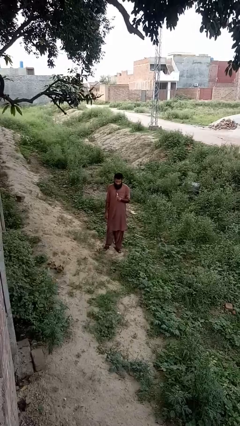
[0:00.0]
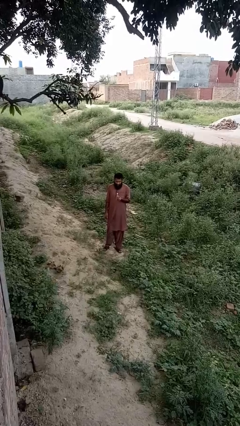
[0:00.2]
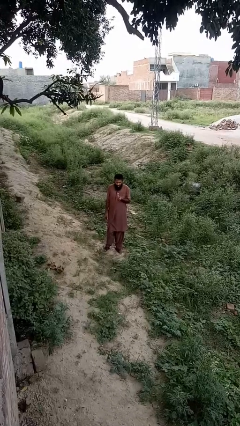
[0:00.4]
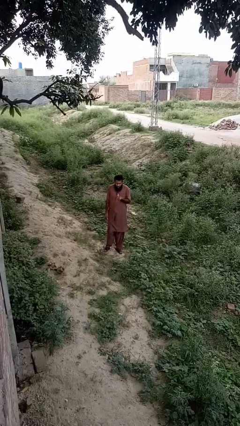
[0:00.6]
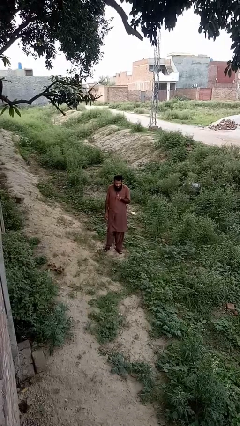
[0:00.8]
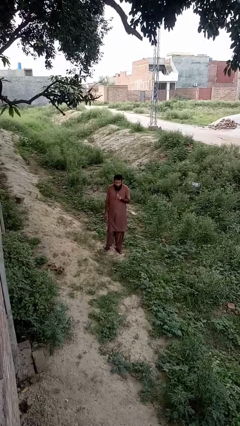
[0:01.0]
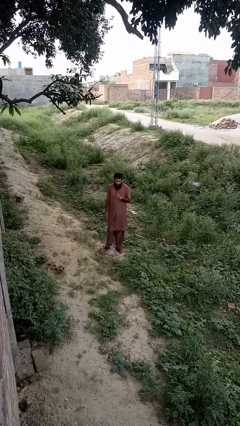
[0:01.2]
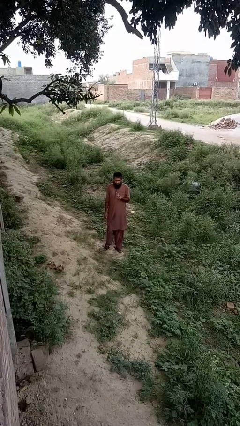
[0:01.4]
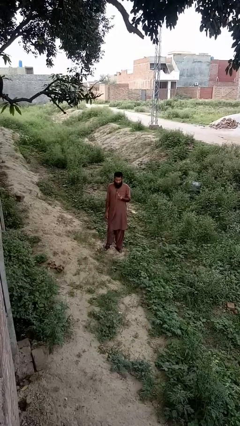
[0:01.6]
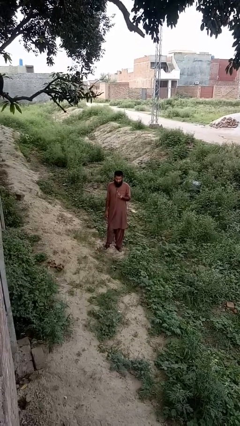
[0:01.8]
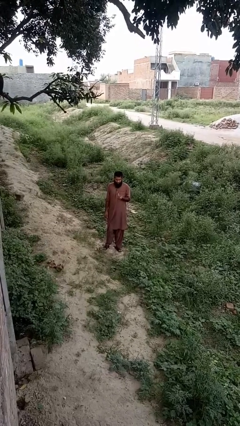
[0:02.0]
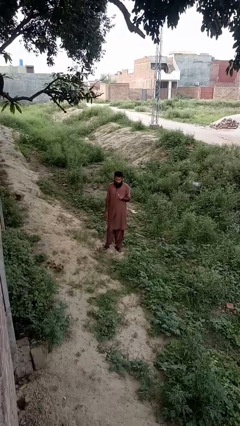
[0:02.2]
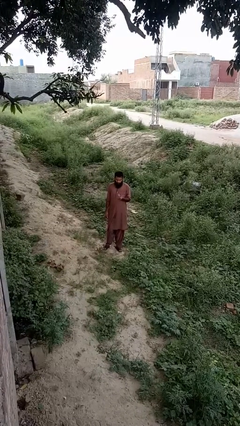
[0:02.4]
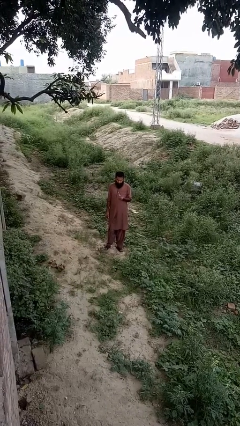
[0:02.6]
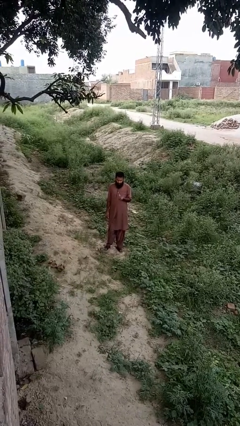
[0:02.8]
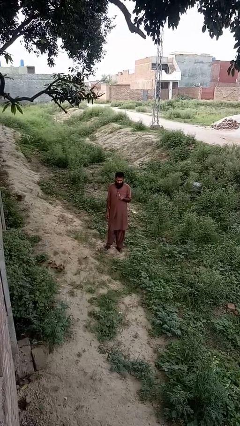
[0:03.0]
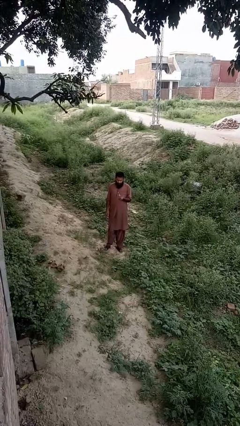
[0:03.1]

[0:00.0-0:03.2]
person extinguishes candle

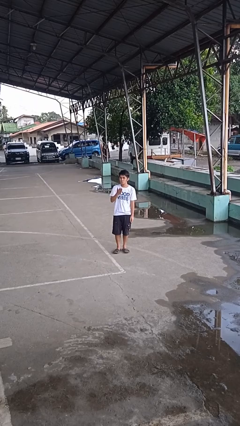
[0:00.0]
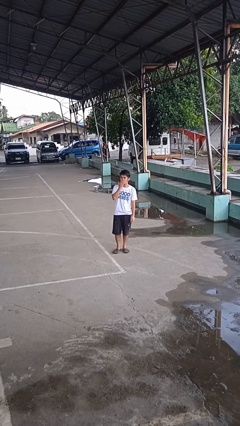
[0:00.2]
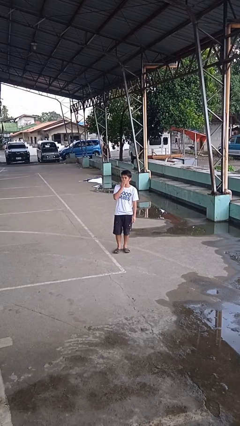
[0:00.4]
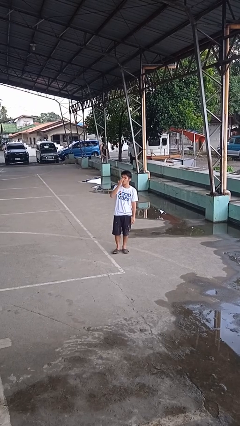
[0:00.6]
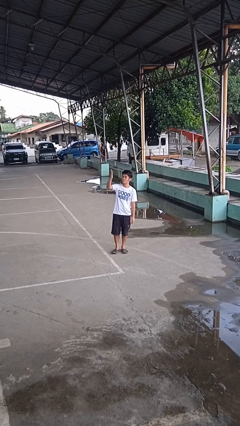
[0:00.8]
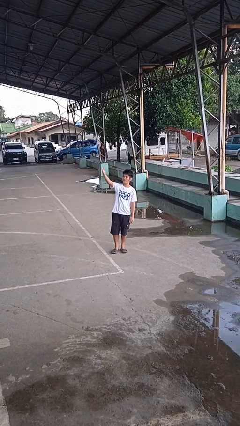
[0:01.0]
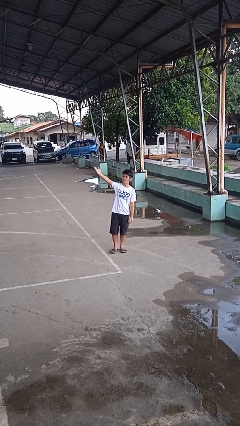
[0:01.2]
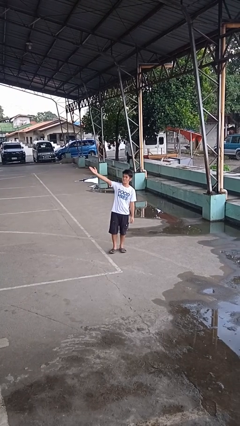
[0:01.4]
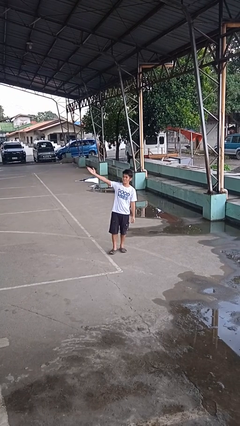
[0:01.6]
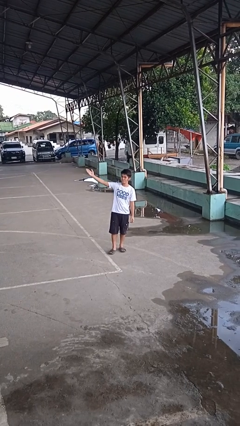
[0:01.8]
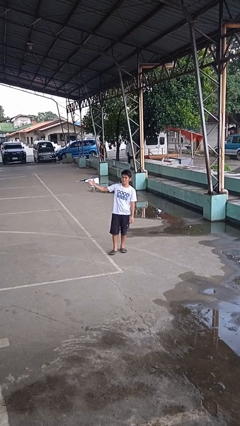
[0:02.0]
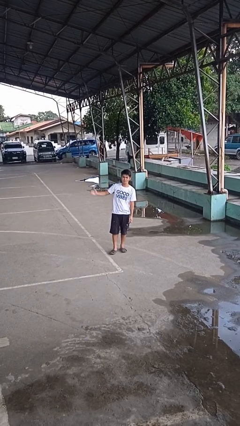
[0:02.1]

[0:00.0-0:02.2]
person gestures blow kiss

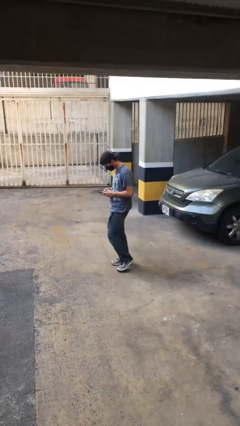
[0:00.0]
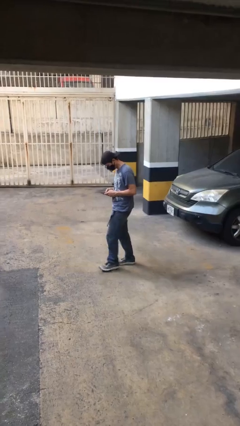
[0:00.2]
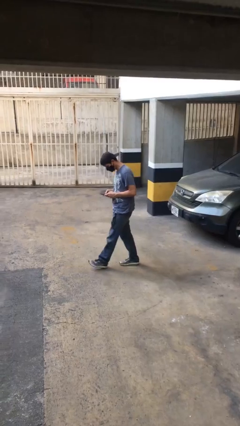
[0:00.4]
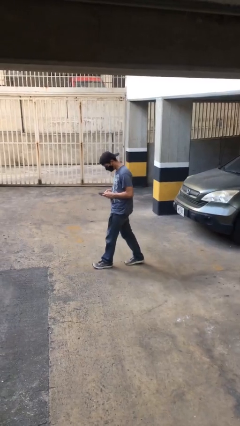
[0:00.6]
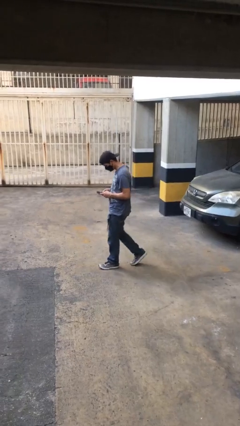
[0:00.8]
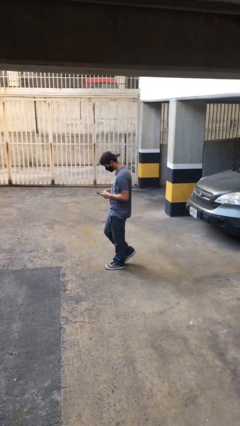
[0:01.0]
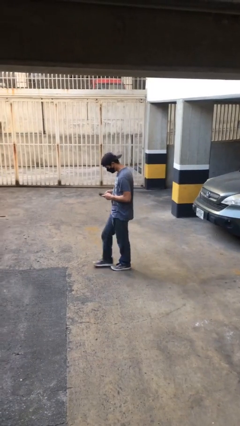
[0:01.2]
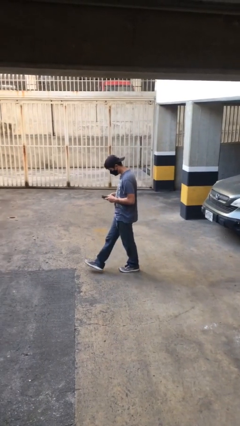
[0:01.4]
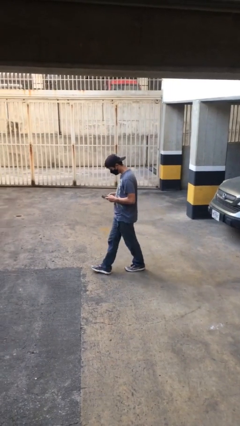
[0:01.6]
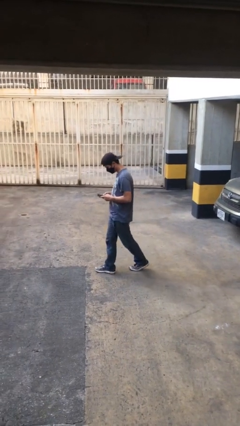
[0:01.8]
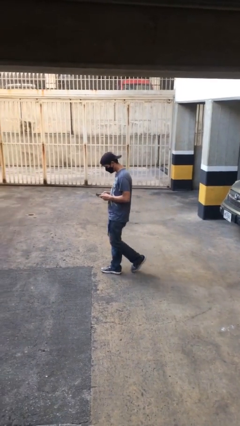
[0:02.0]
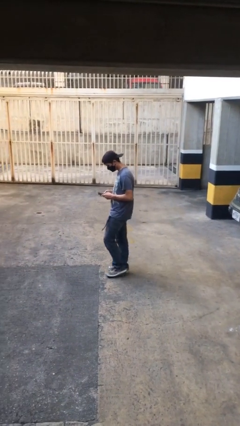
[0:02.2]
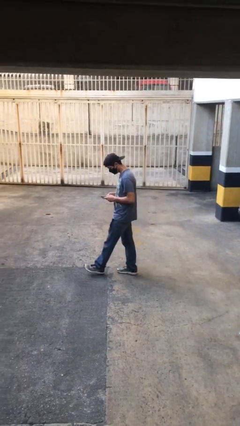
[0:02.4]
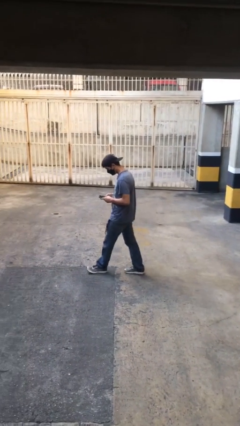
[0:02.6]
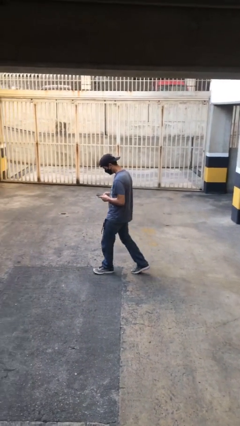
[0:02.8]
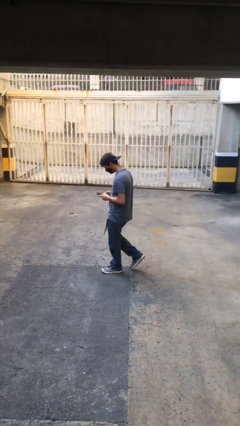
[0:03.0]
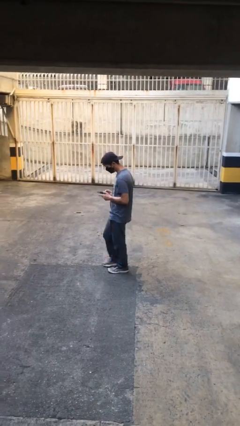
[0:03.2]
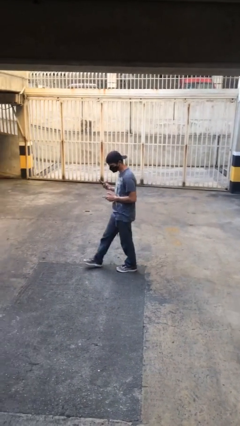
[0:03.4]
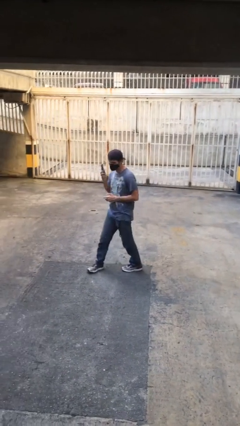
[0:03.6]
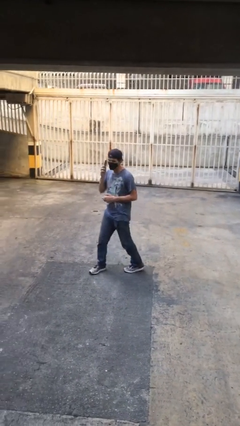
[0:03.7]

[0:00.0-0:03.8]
person texts on phone

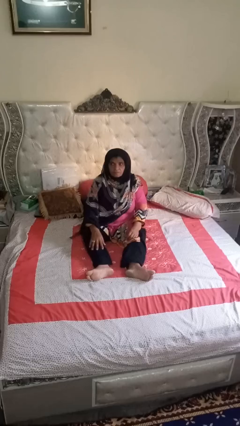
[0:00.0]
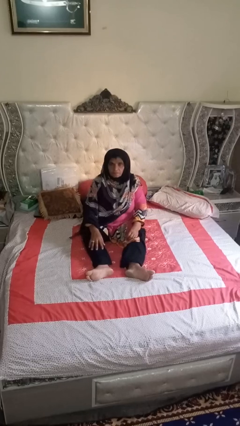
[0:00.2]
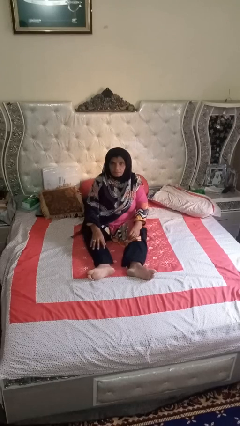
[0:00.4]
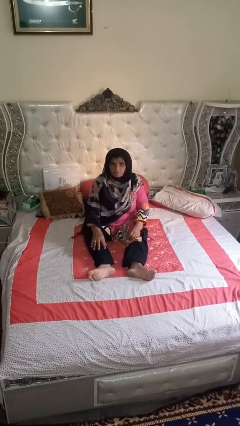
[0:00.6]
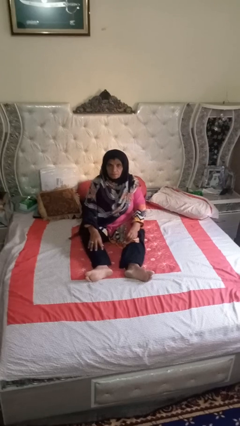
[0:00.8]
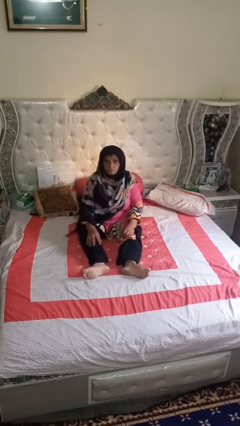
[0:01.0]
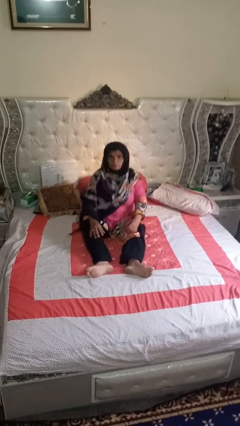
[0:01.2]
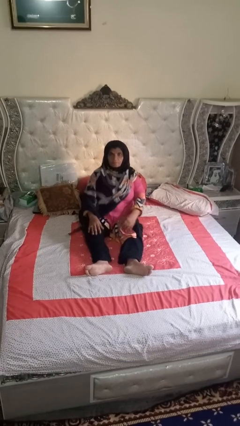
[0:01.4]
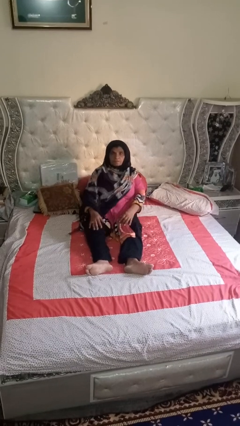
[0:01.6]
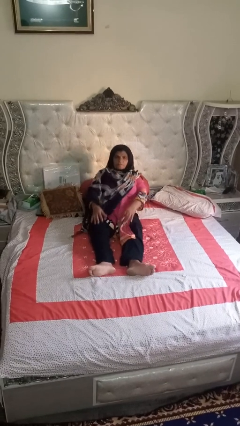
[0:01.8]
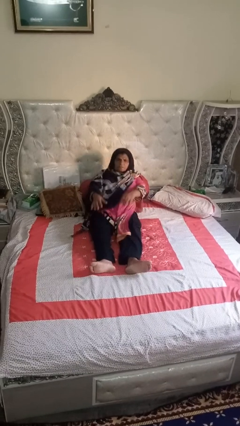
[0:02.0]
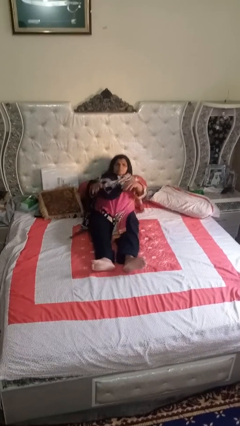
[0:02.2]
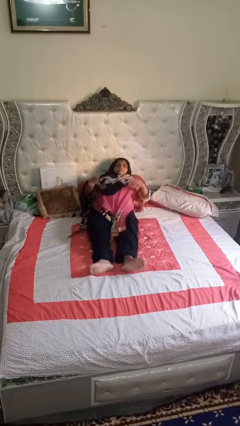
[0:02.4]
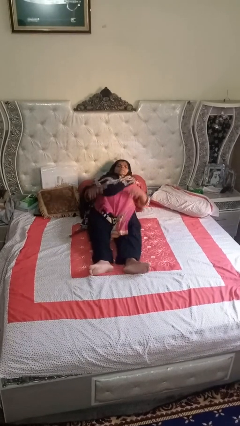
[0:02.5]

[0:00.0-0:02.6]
person lies down on bed

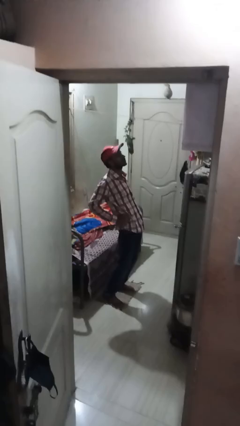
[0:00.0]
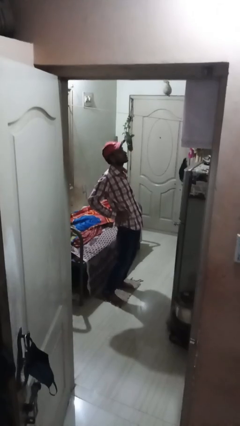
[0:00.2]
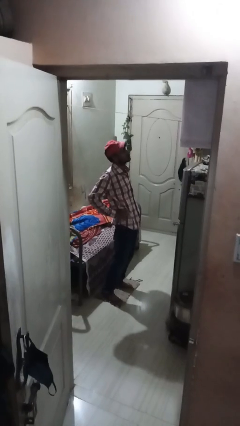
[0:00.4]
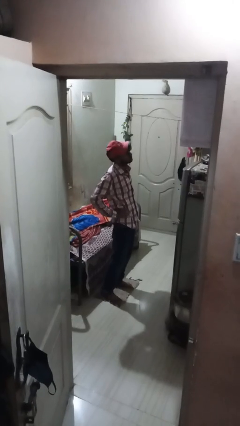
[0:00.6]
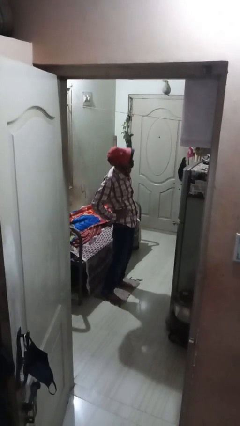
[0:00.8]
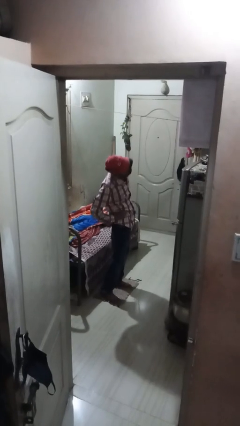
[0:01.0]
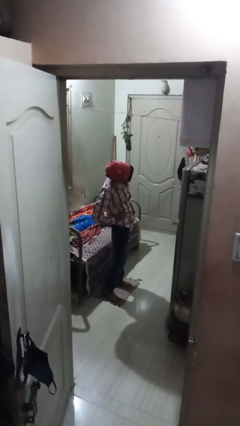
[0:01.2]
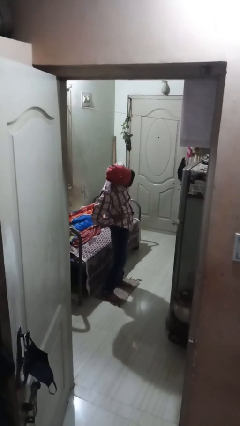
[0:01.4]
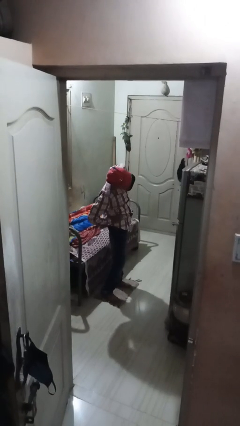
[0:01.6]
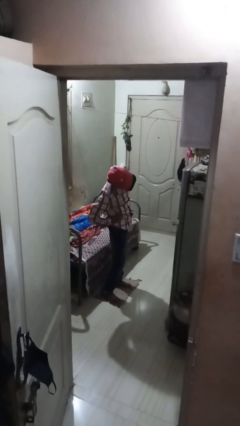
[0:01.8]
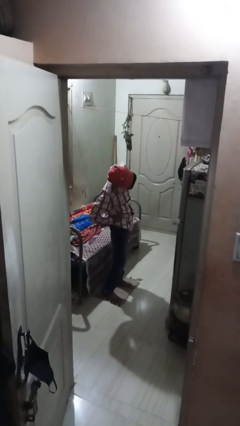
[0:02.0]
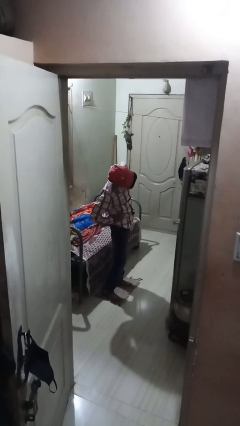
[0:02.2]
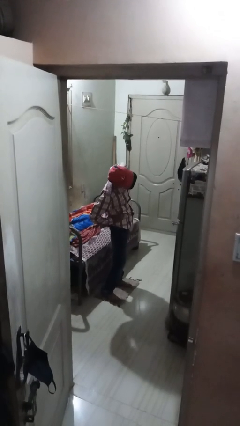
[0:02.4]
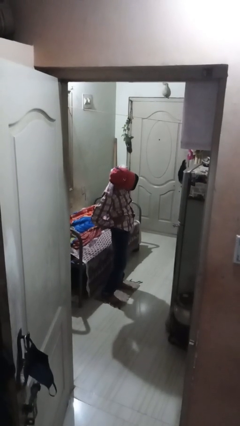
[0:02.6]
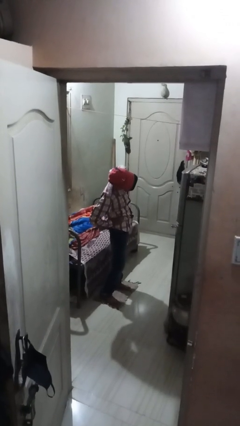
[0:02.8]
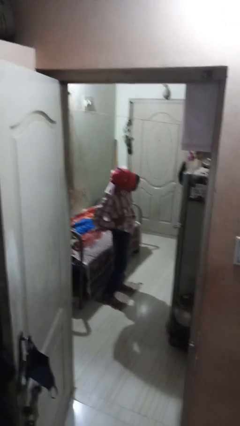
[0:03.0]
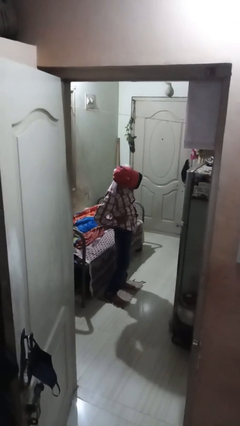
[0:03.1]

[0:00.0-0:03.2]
person stretches arms to side

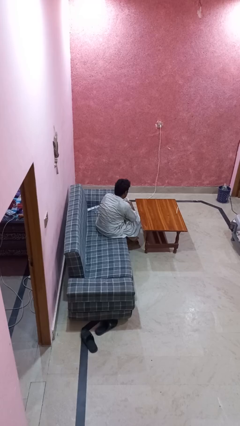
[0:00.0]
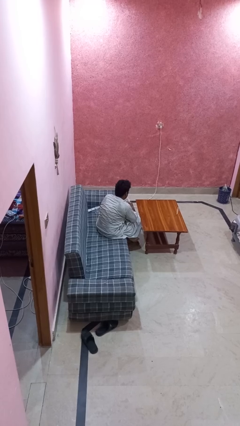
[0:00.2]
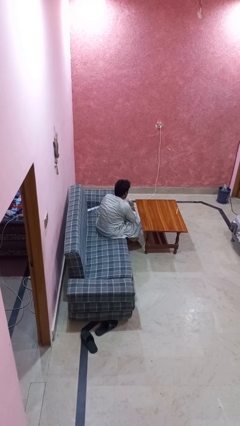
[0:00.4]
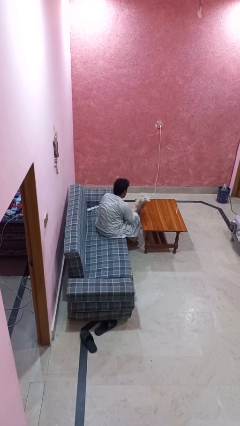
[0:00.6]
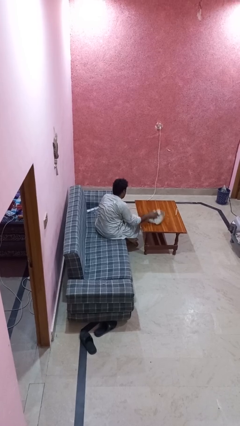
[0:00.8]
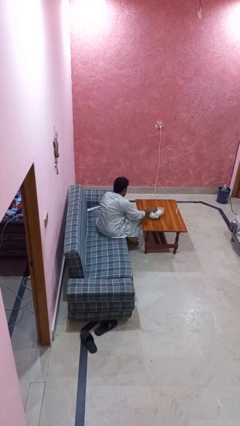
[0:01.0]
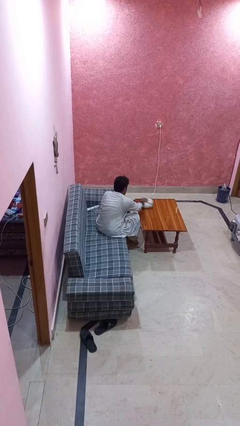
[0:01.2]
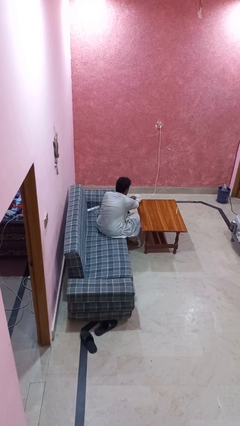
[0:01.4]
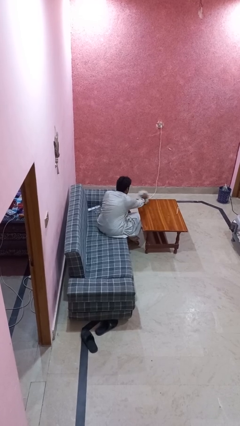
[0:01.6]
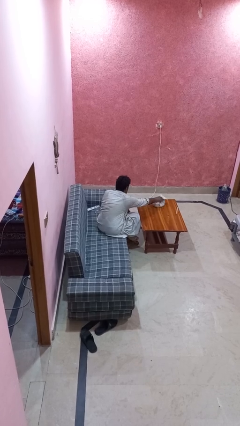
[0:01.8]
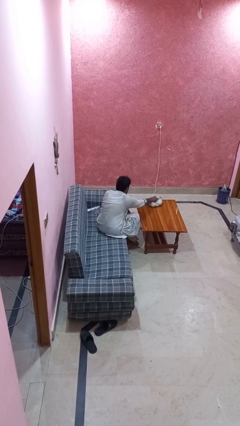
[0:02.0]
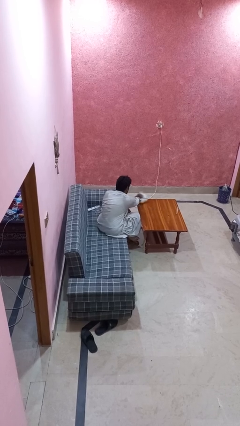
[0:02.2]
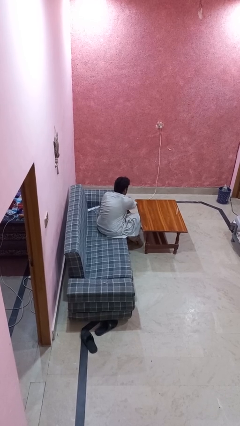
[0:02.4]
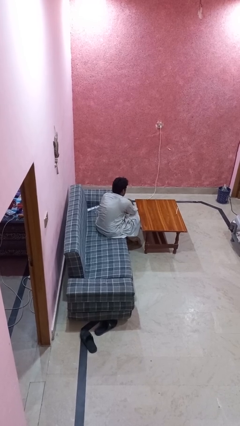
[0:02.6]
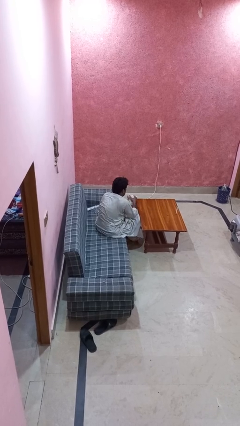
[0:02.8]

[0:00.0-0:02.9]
person cleans table with rag

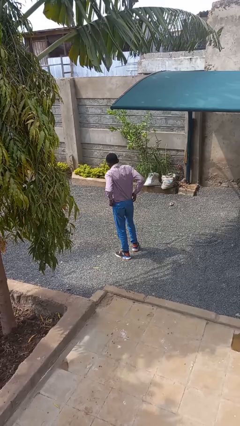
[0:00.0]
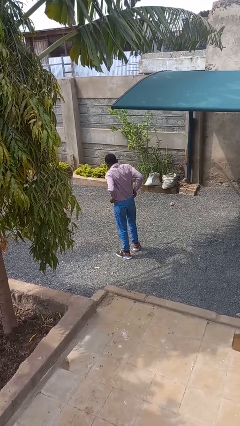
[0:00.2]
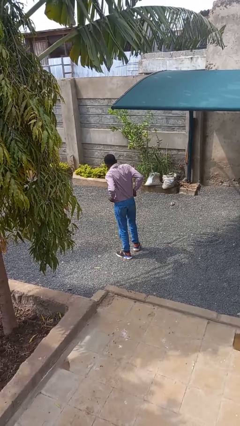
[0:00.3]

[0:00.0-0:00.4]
person untucks shirt
